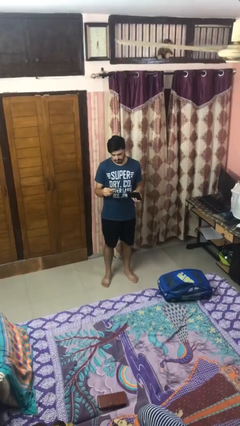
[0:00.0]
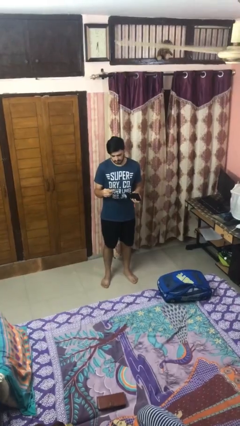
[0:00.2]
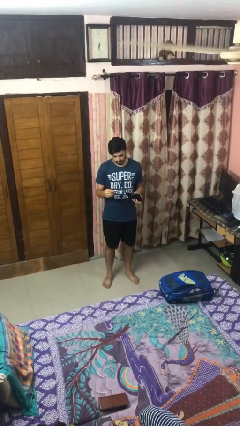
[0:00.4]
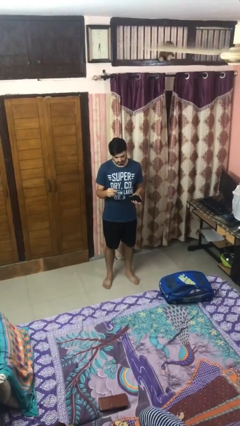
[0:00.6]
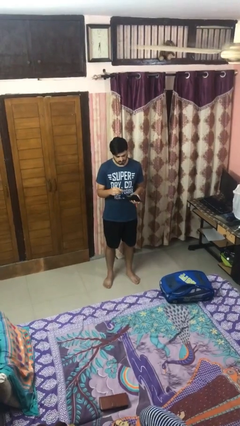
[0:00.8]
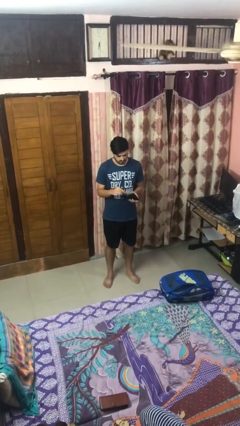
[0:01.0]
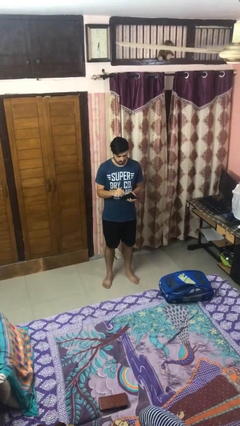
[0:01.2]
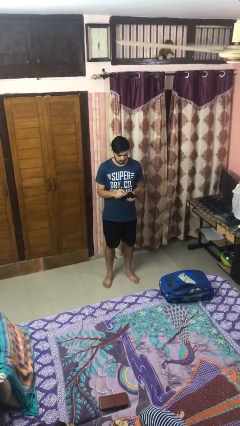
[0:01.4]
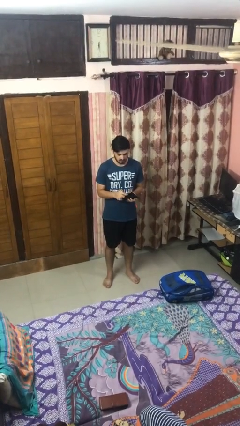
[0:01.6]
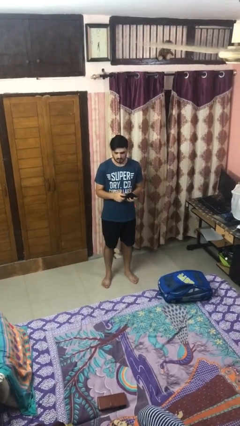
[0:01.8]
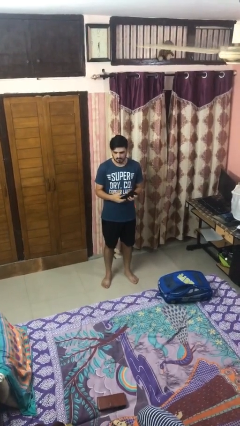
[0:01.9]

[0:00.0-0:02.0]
person puts object into purse

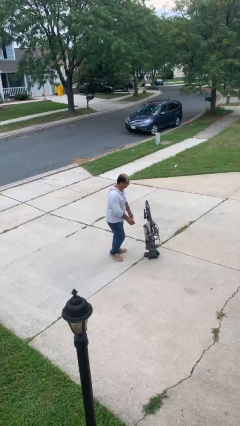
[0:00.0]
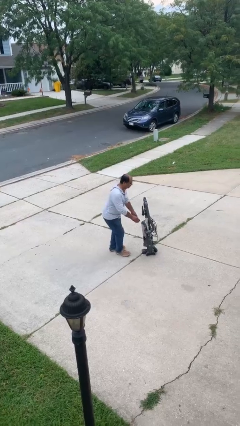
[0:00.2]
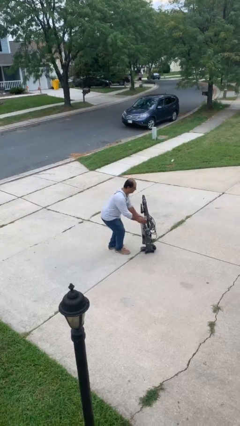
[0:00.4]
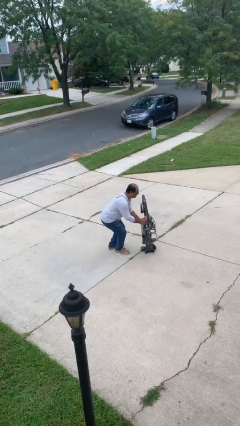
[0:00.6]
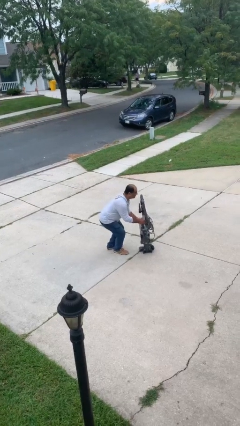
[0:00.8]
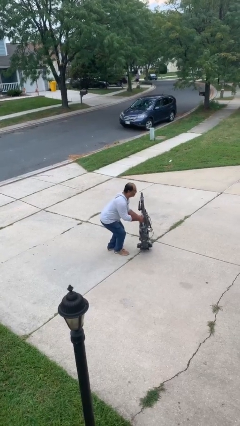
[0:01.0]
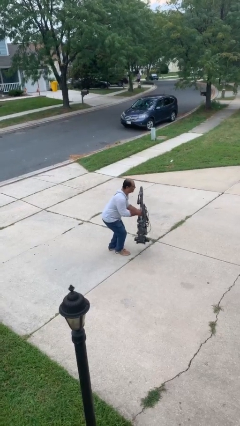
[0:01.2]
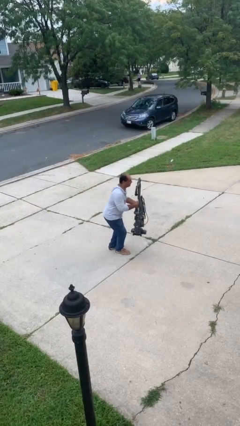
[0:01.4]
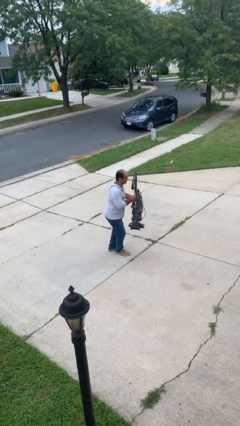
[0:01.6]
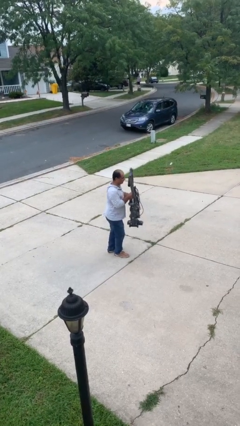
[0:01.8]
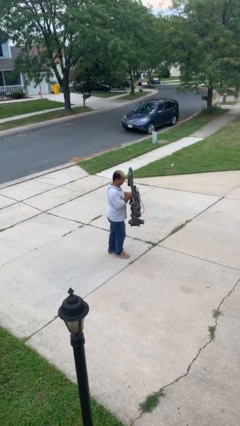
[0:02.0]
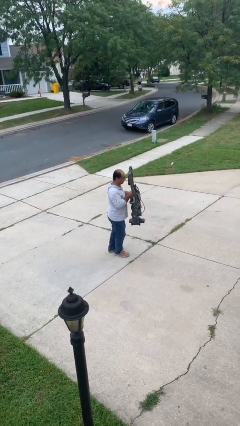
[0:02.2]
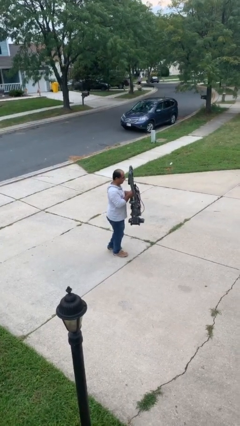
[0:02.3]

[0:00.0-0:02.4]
person picks up object from floor

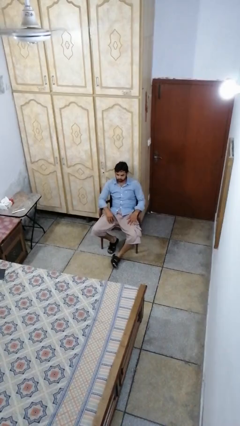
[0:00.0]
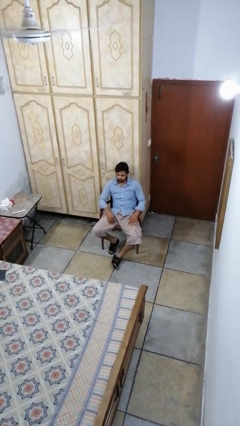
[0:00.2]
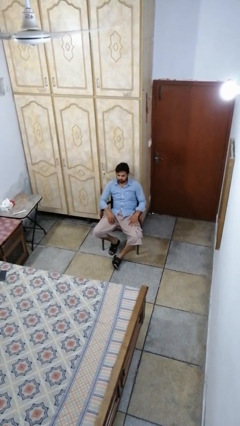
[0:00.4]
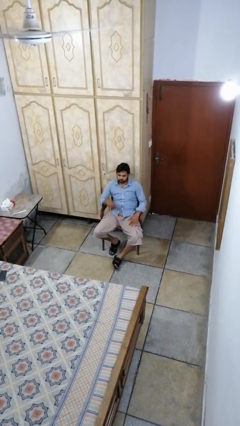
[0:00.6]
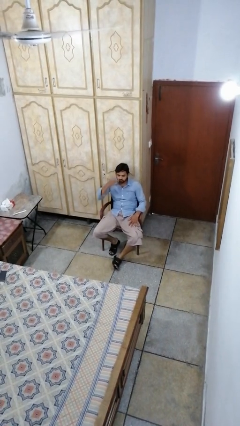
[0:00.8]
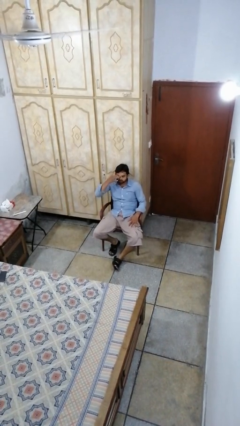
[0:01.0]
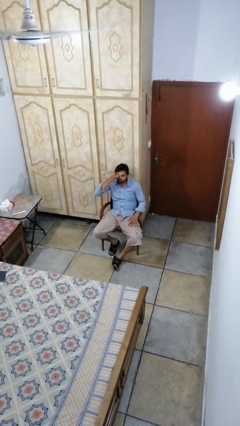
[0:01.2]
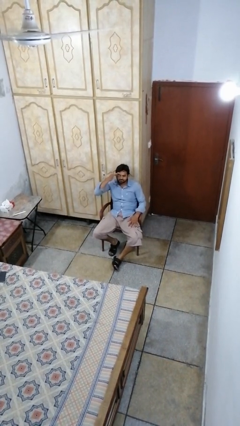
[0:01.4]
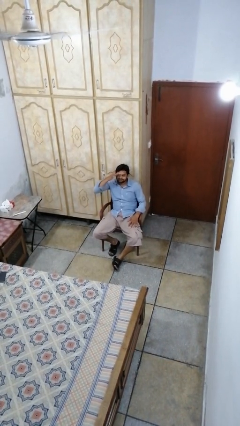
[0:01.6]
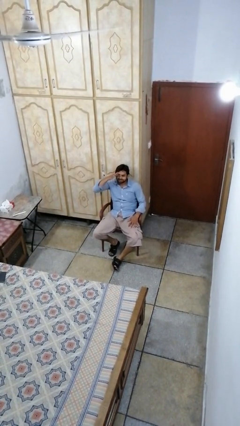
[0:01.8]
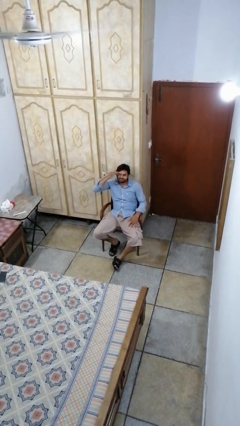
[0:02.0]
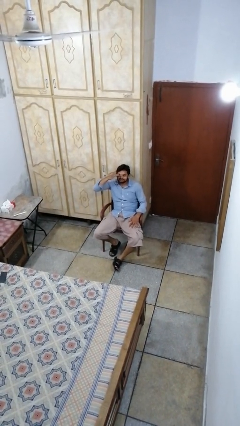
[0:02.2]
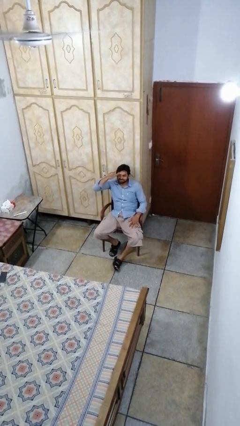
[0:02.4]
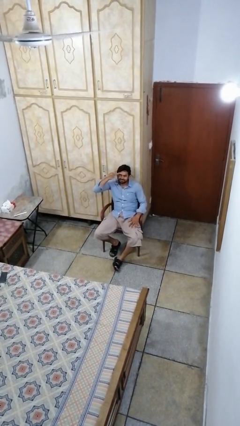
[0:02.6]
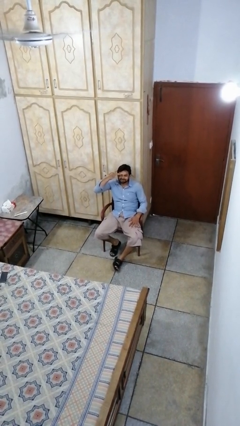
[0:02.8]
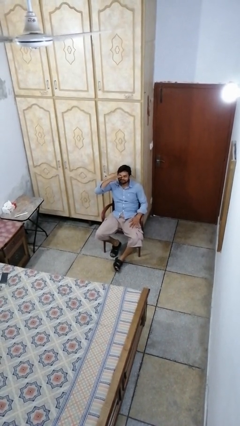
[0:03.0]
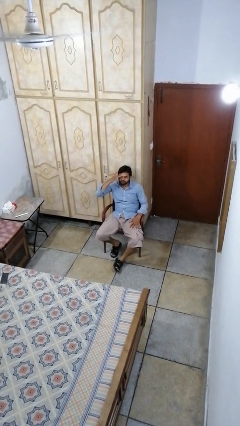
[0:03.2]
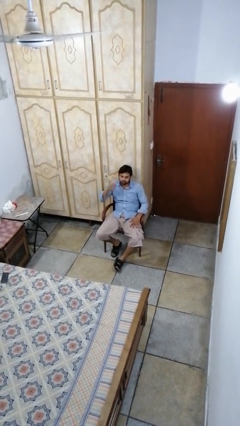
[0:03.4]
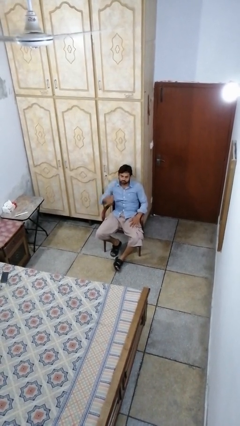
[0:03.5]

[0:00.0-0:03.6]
person rubs eyes

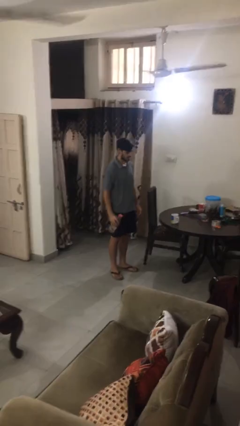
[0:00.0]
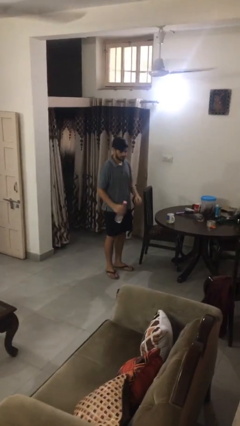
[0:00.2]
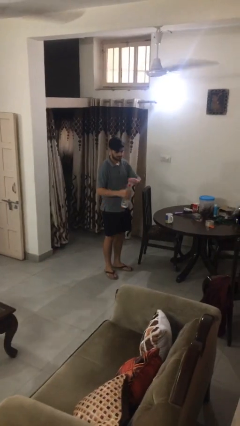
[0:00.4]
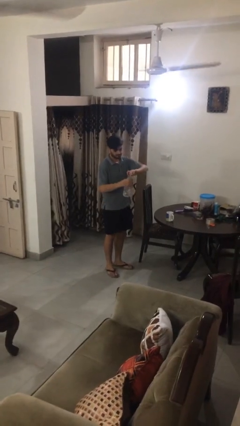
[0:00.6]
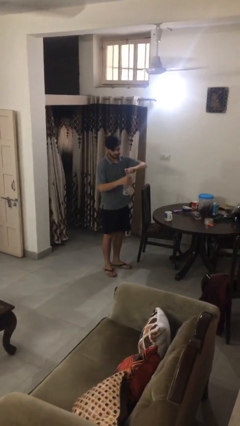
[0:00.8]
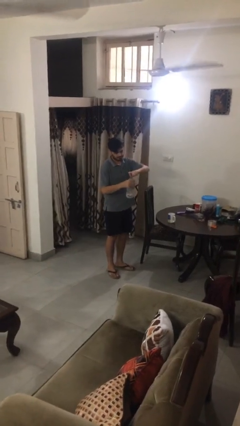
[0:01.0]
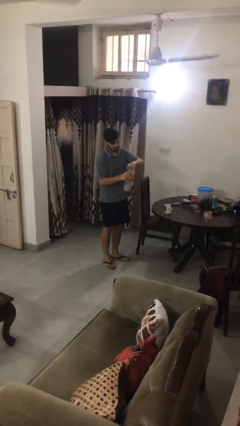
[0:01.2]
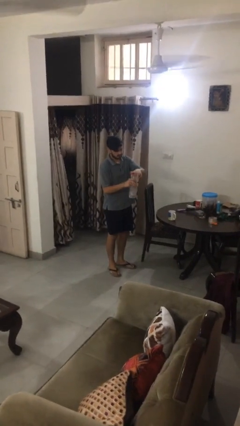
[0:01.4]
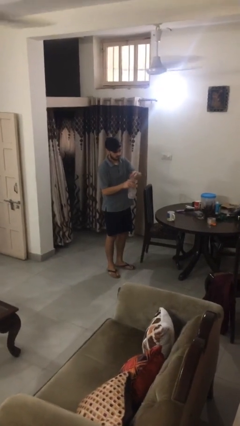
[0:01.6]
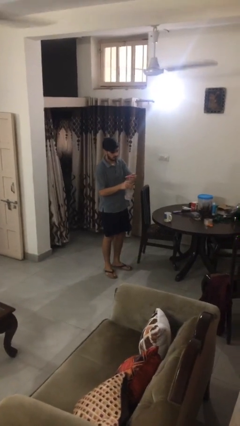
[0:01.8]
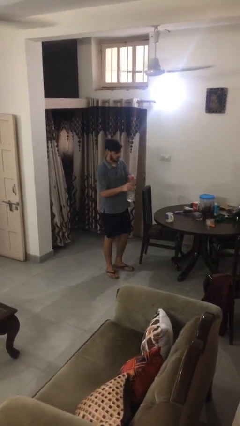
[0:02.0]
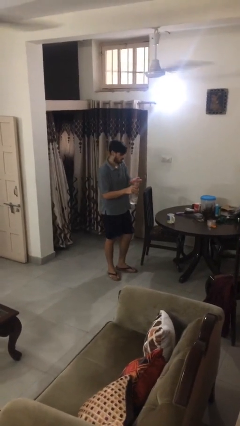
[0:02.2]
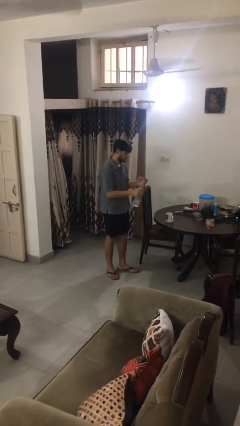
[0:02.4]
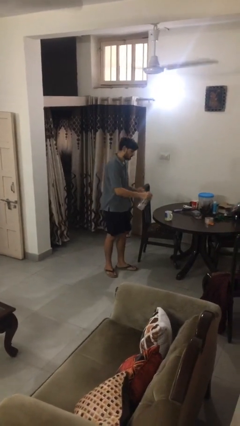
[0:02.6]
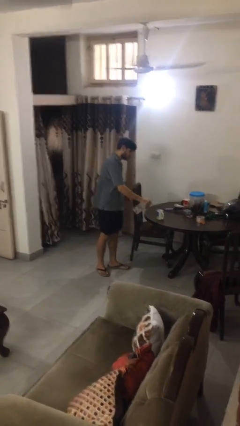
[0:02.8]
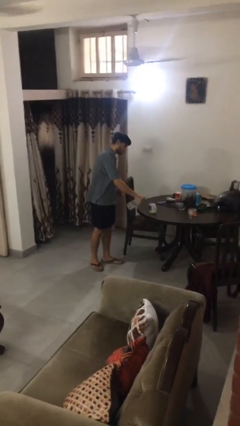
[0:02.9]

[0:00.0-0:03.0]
person unscrews lid from bottle

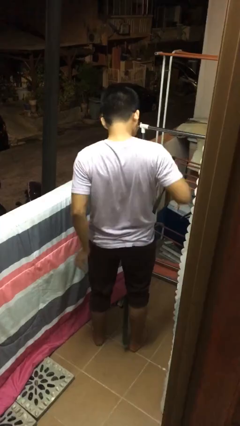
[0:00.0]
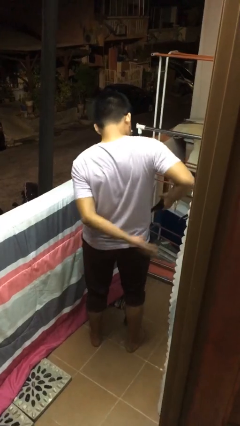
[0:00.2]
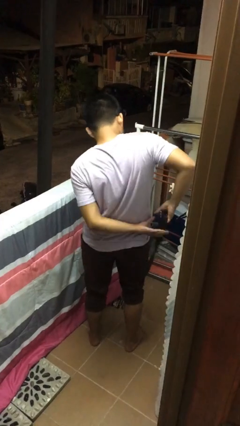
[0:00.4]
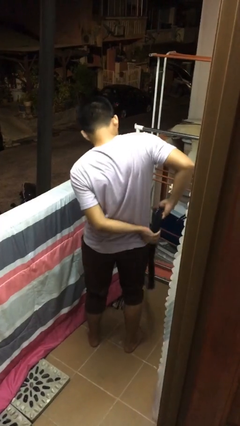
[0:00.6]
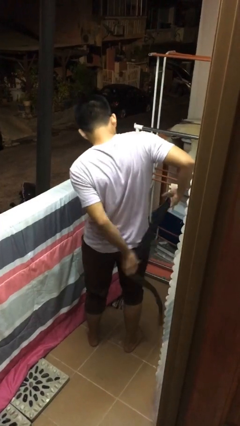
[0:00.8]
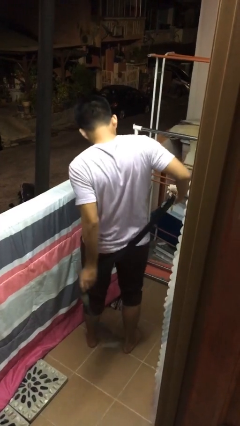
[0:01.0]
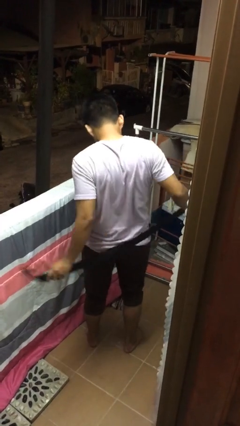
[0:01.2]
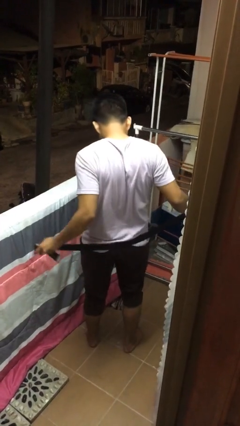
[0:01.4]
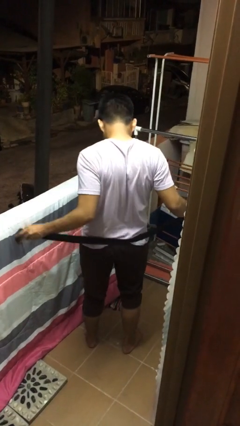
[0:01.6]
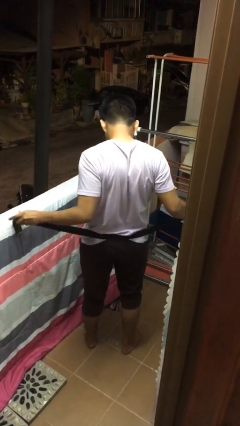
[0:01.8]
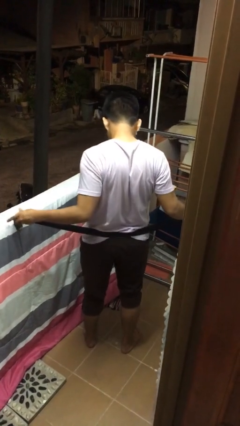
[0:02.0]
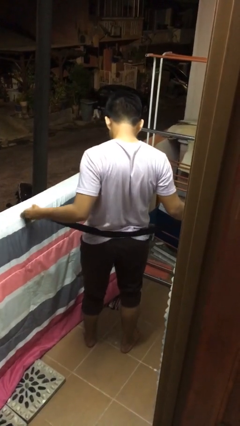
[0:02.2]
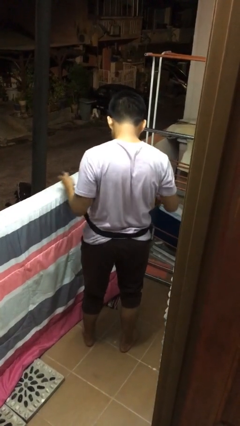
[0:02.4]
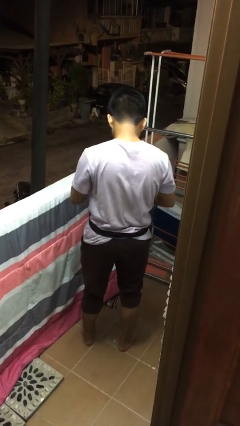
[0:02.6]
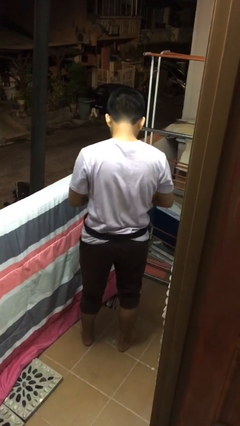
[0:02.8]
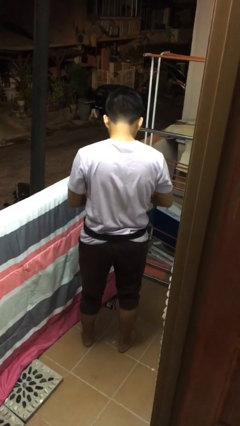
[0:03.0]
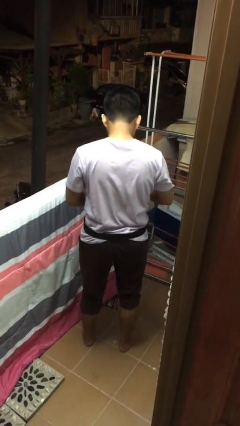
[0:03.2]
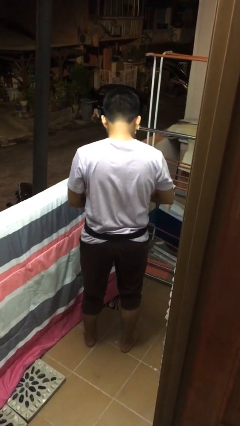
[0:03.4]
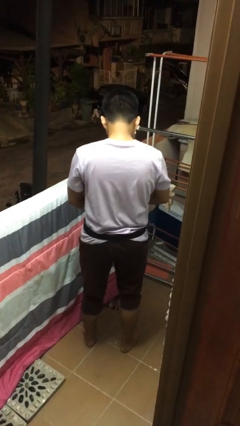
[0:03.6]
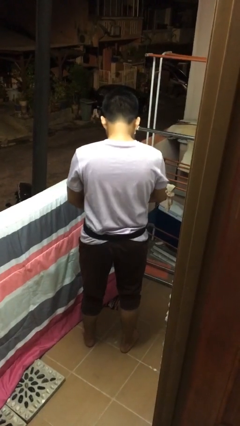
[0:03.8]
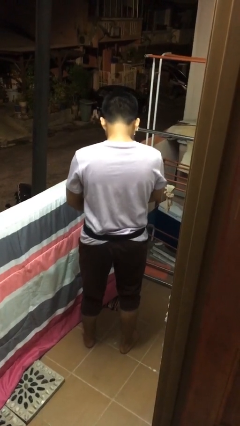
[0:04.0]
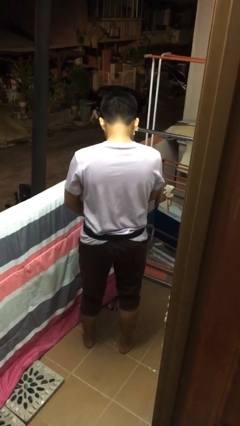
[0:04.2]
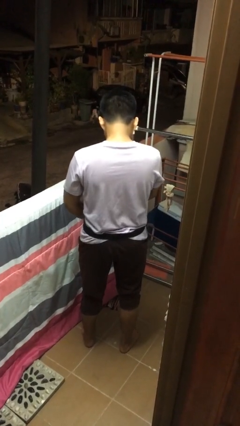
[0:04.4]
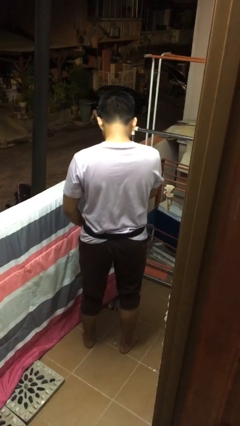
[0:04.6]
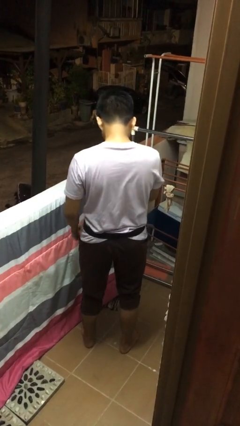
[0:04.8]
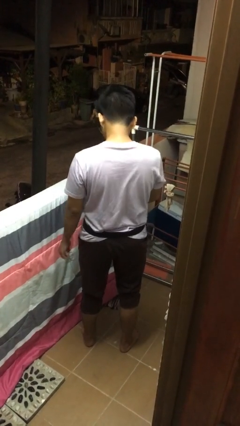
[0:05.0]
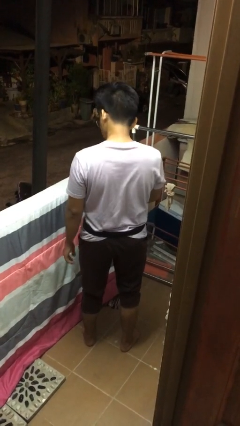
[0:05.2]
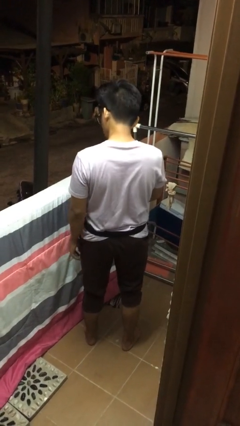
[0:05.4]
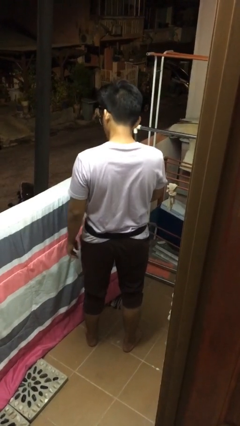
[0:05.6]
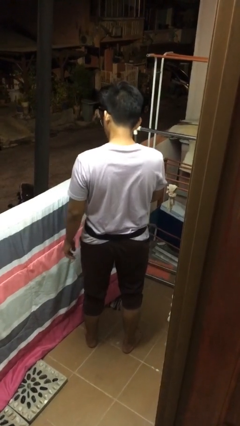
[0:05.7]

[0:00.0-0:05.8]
person puts on belt

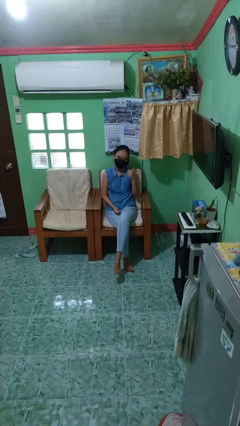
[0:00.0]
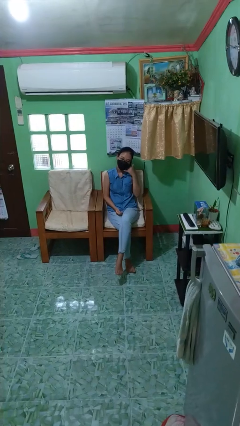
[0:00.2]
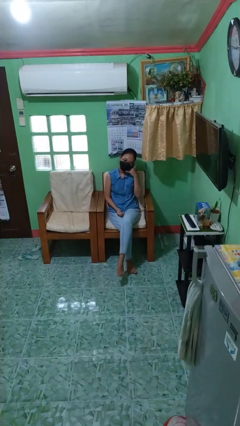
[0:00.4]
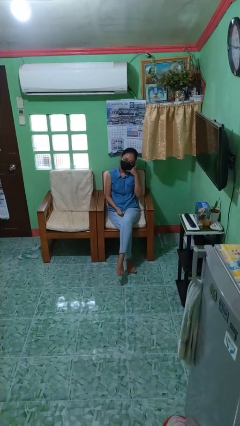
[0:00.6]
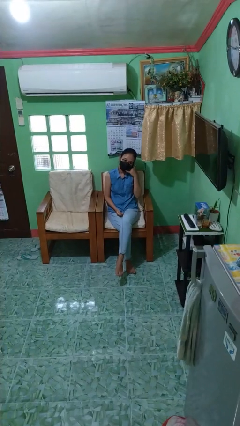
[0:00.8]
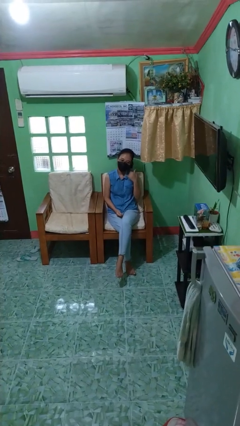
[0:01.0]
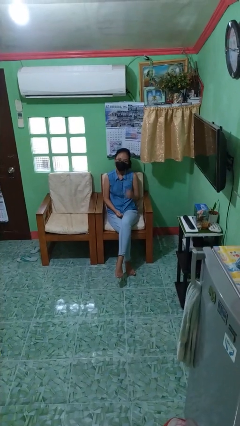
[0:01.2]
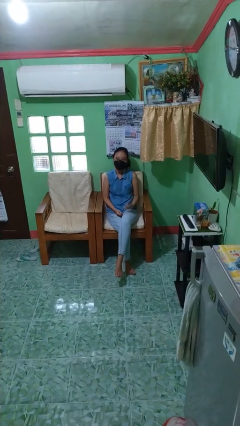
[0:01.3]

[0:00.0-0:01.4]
person gestures call me
